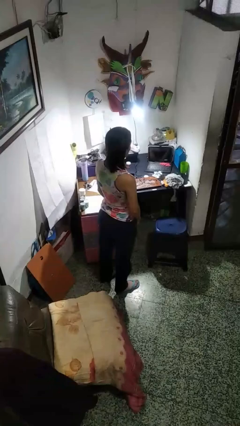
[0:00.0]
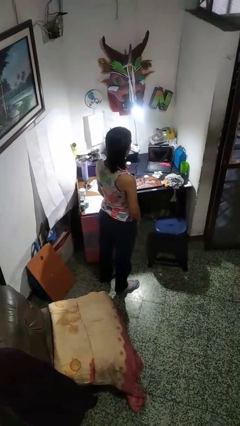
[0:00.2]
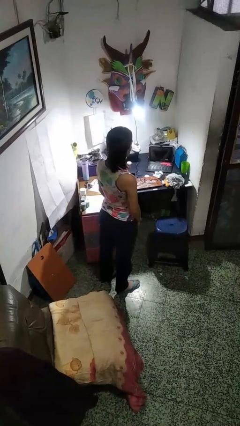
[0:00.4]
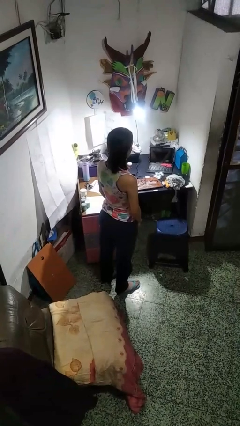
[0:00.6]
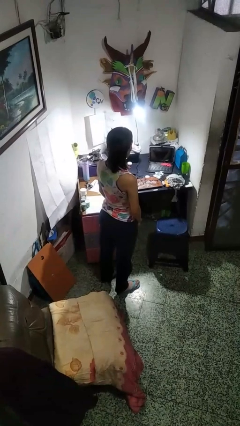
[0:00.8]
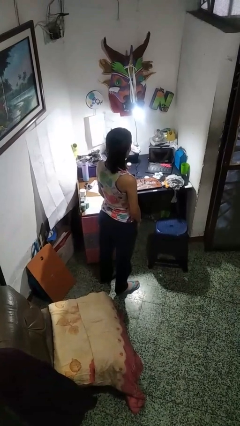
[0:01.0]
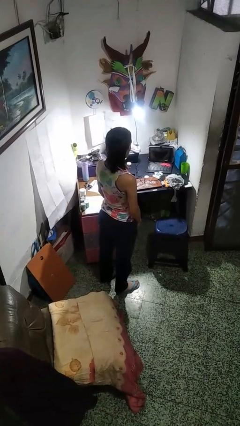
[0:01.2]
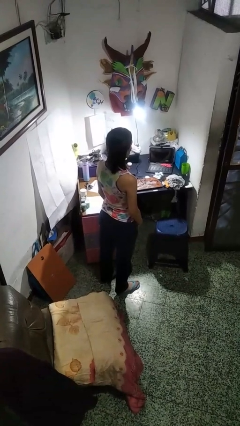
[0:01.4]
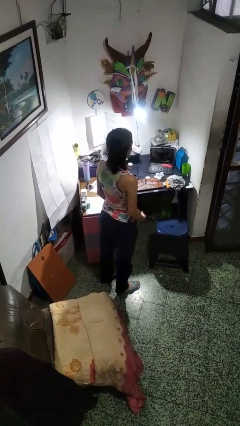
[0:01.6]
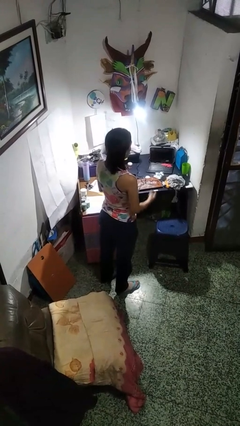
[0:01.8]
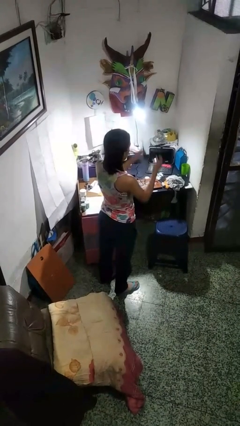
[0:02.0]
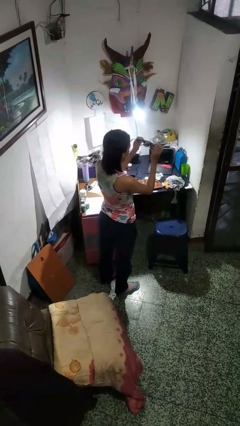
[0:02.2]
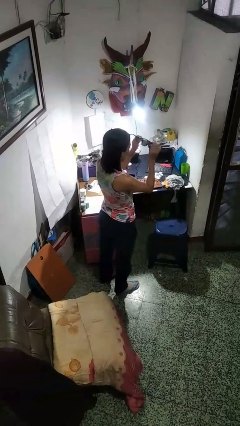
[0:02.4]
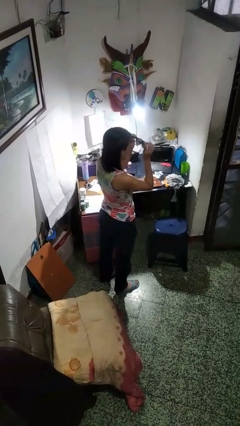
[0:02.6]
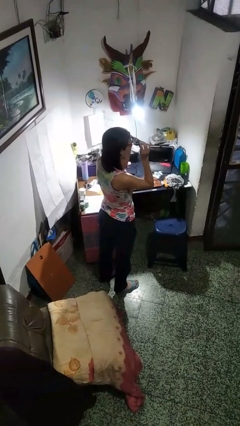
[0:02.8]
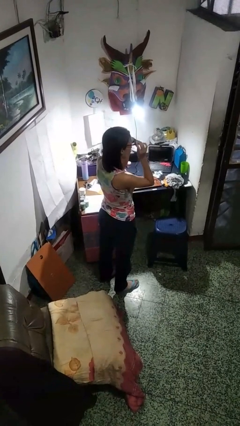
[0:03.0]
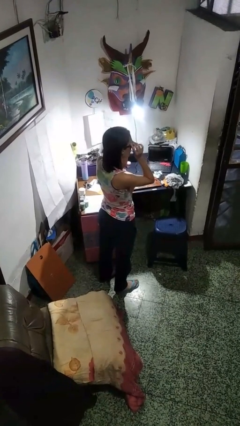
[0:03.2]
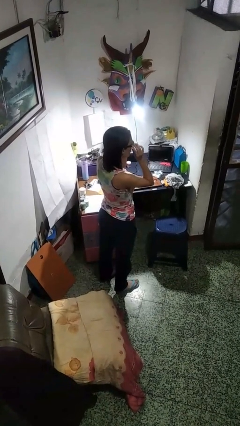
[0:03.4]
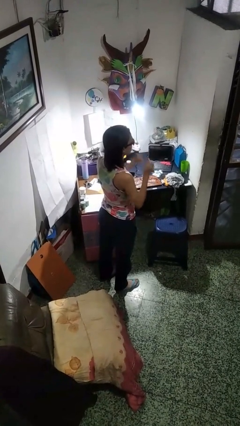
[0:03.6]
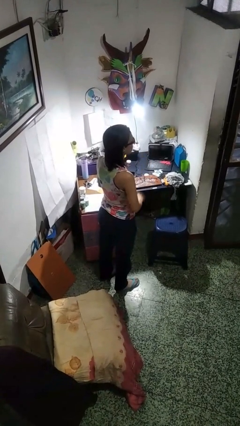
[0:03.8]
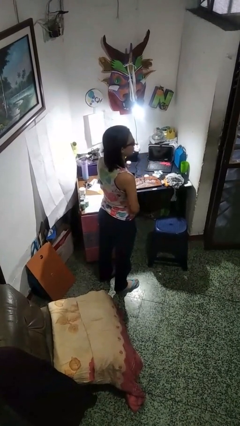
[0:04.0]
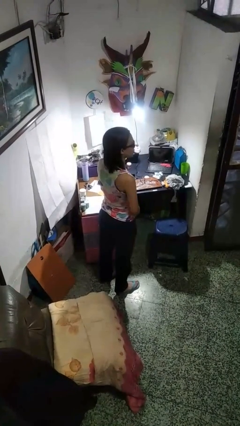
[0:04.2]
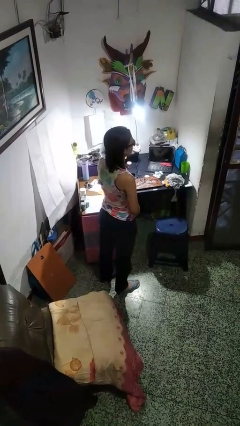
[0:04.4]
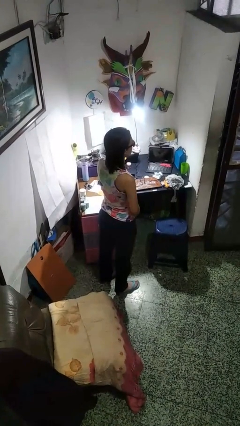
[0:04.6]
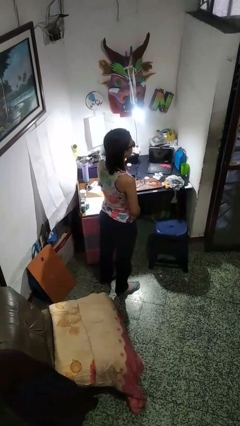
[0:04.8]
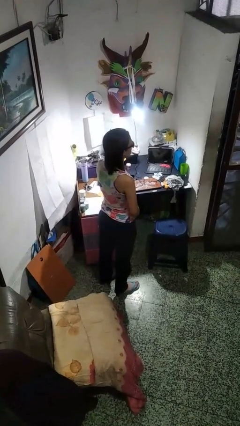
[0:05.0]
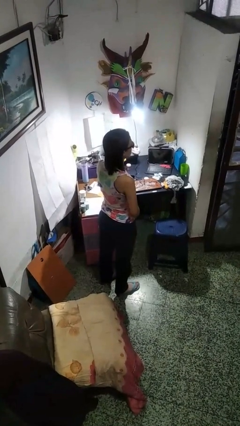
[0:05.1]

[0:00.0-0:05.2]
person puts on sunglasses

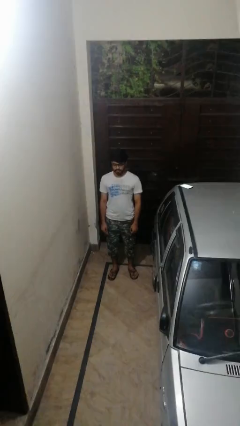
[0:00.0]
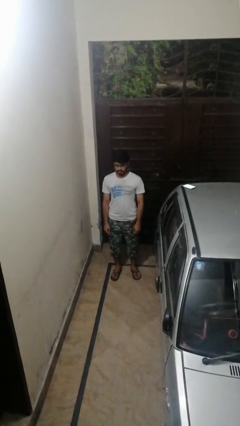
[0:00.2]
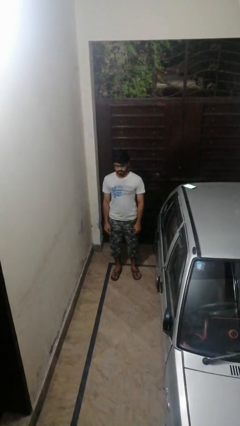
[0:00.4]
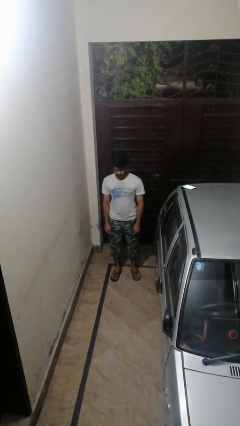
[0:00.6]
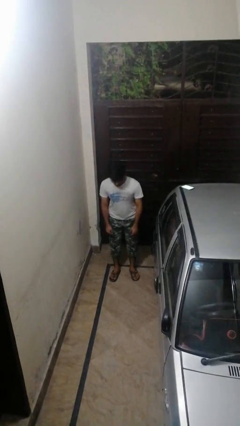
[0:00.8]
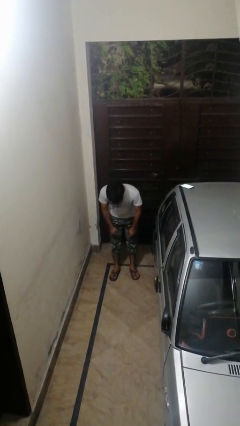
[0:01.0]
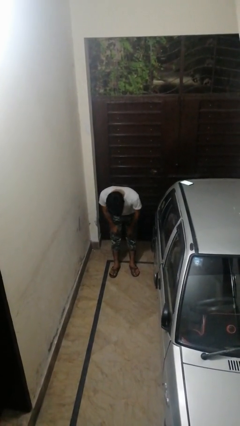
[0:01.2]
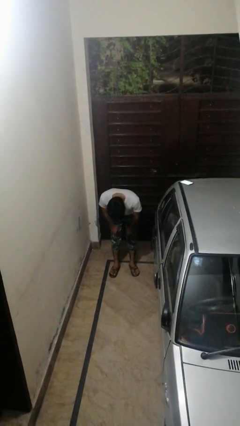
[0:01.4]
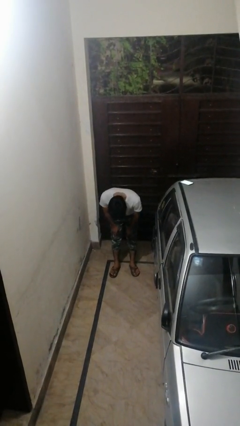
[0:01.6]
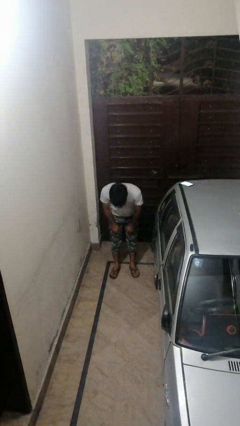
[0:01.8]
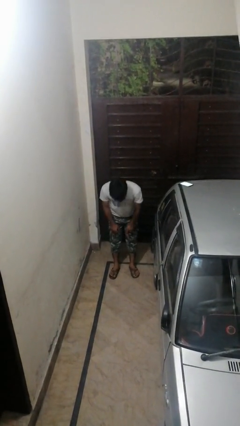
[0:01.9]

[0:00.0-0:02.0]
person bows

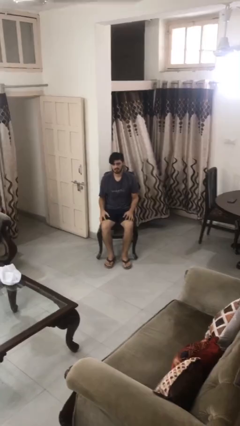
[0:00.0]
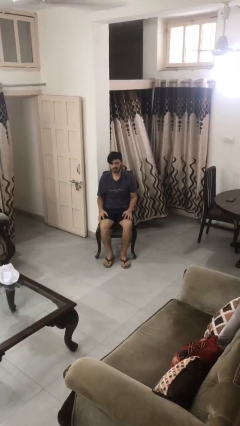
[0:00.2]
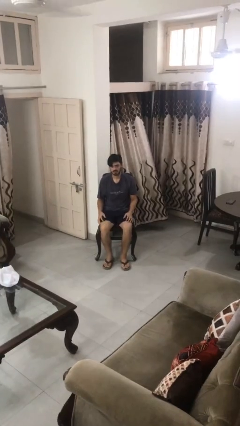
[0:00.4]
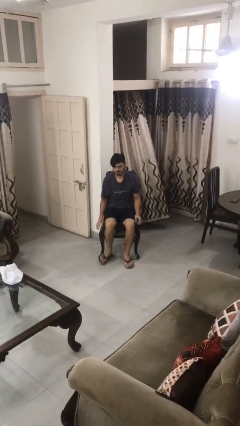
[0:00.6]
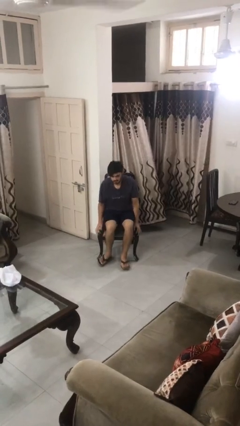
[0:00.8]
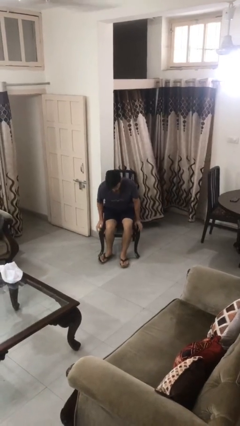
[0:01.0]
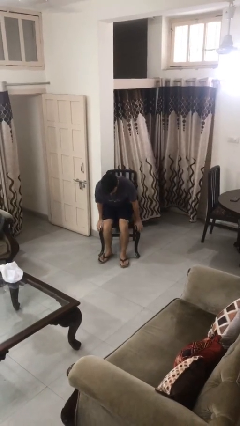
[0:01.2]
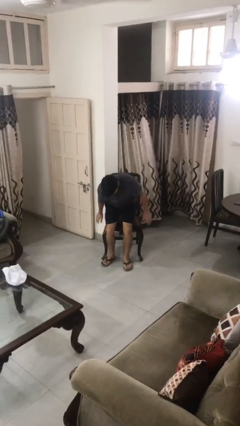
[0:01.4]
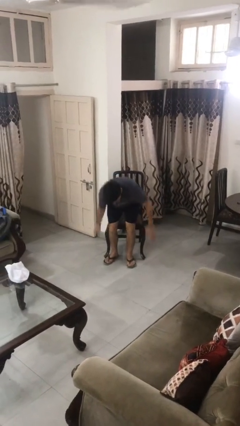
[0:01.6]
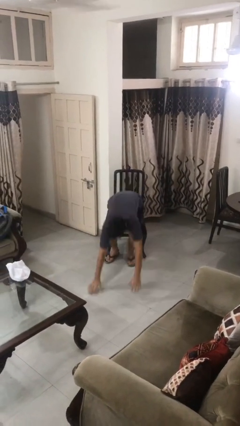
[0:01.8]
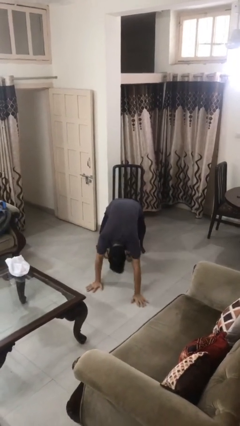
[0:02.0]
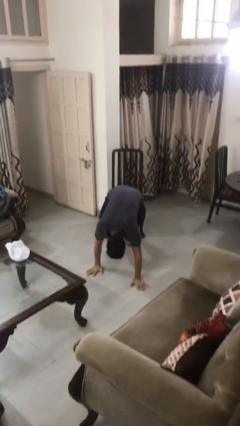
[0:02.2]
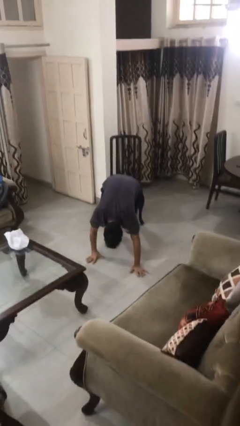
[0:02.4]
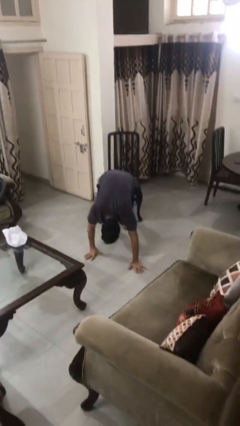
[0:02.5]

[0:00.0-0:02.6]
person falls from chair

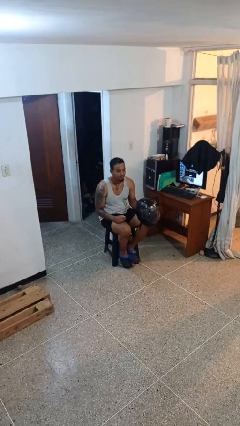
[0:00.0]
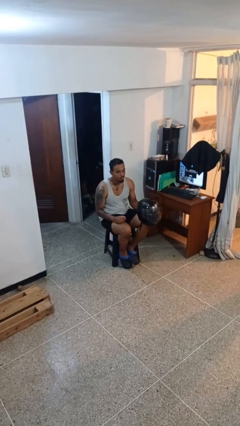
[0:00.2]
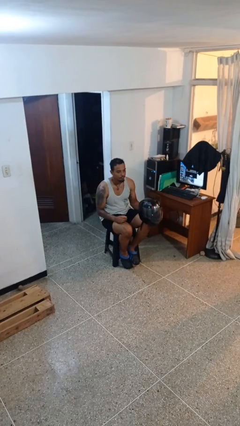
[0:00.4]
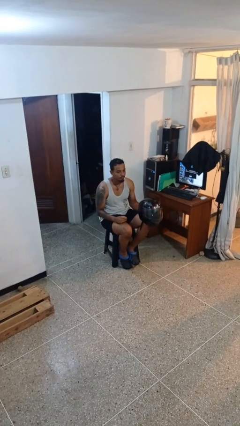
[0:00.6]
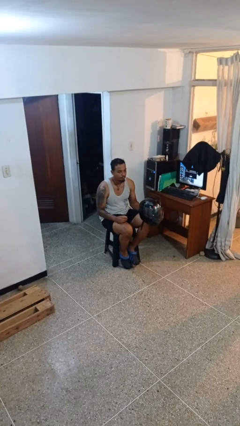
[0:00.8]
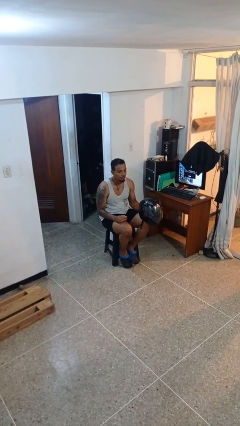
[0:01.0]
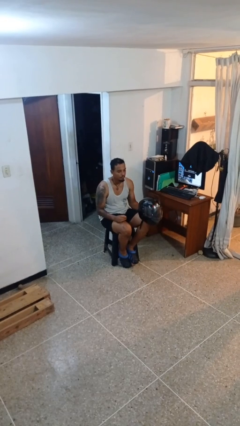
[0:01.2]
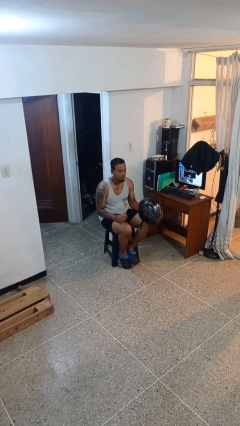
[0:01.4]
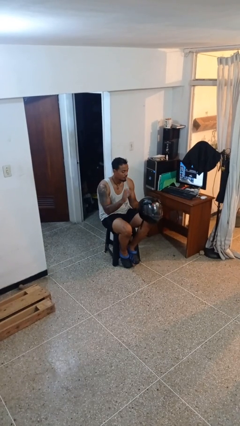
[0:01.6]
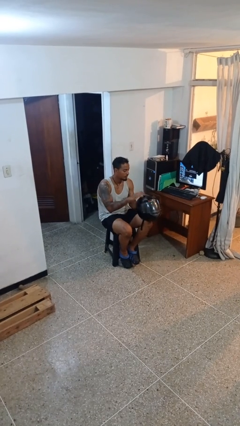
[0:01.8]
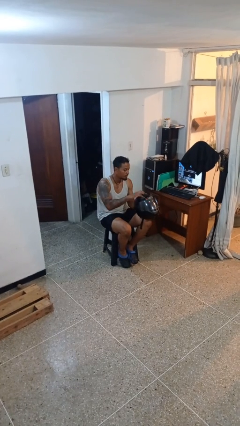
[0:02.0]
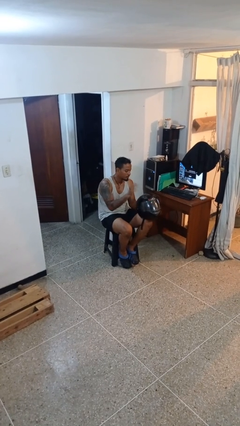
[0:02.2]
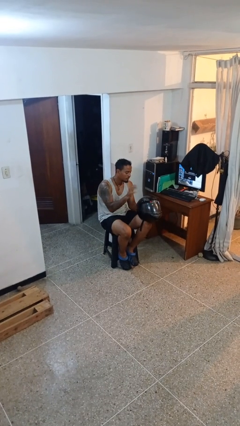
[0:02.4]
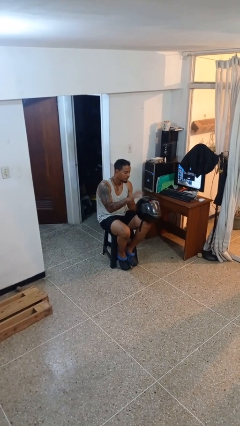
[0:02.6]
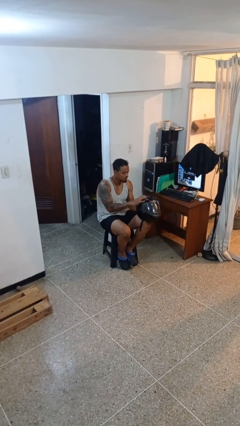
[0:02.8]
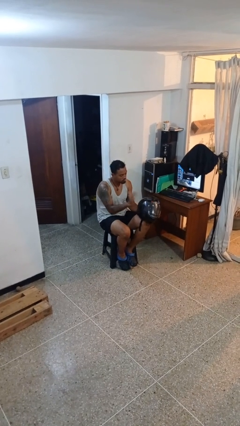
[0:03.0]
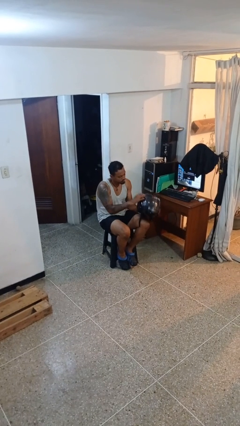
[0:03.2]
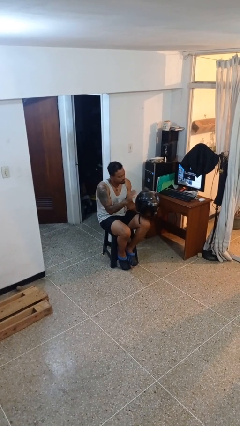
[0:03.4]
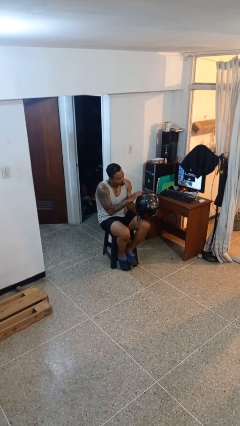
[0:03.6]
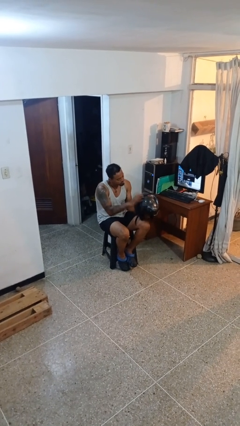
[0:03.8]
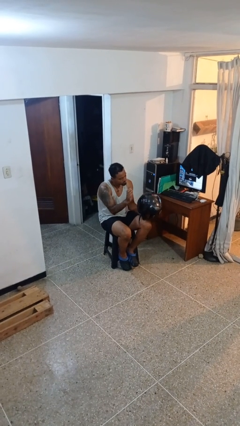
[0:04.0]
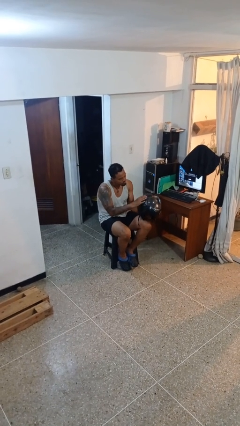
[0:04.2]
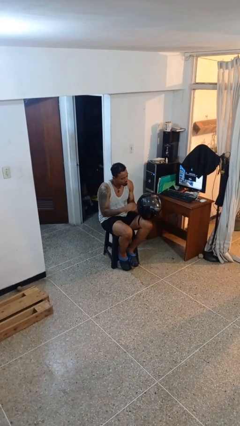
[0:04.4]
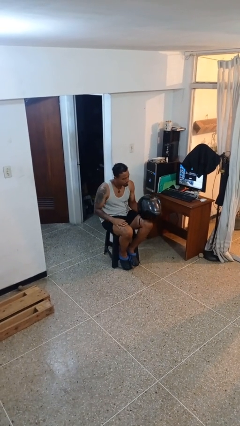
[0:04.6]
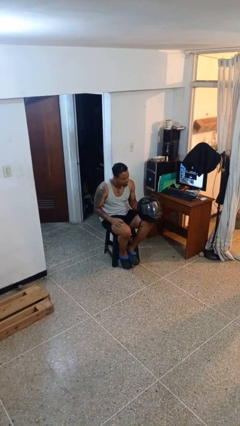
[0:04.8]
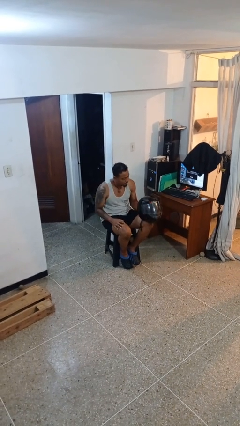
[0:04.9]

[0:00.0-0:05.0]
person taps object with finger

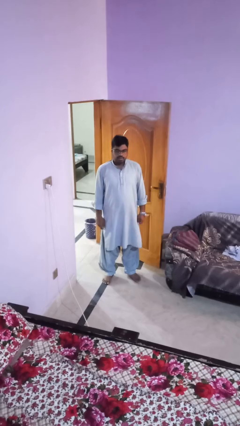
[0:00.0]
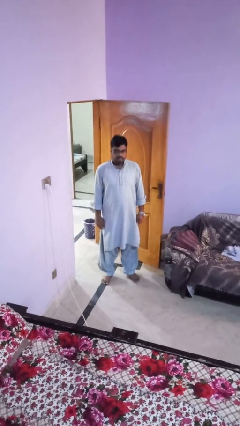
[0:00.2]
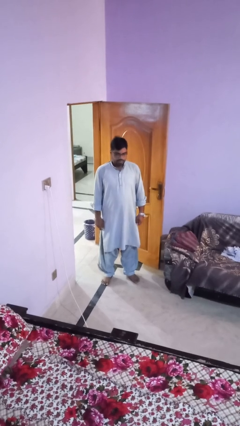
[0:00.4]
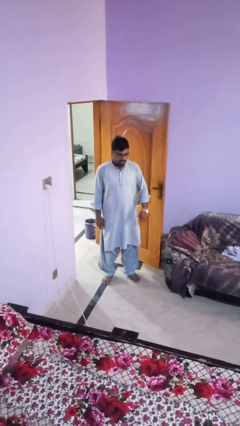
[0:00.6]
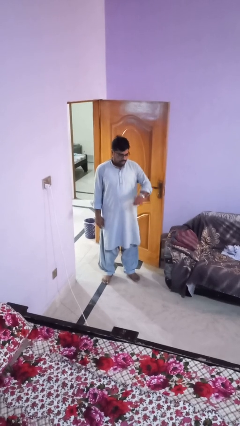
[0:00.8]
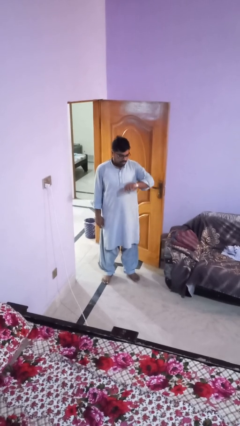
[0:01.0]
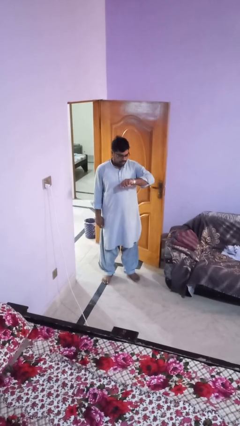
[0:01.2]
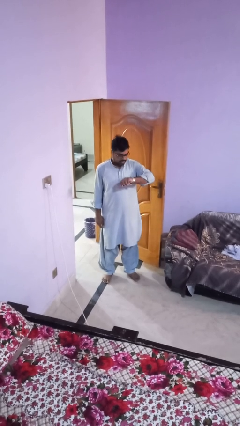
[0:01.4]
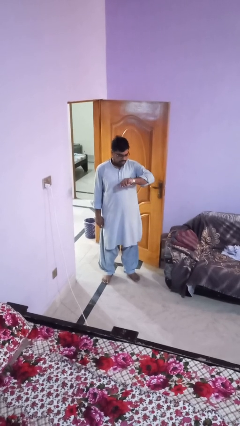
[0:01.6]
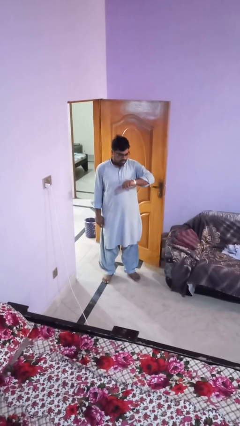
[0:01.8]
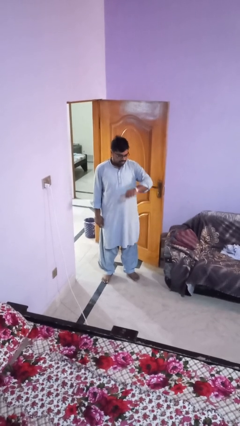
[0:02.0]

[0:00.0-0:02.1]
person looks at wristwatch

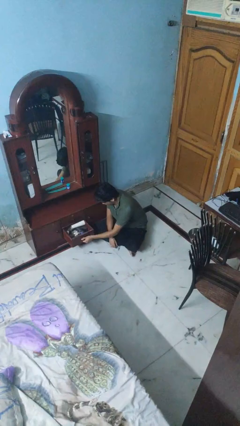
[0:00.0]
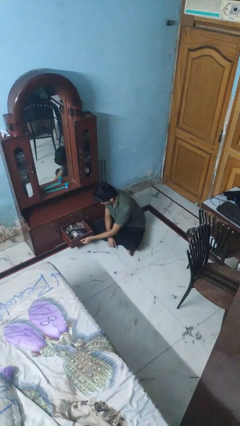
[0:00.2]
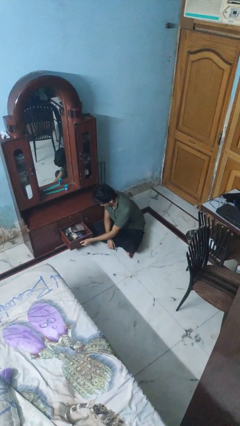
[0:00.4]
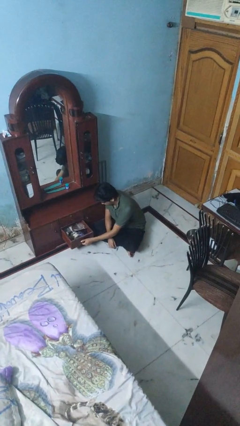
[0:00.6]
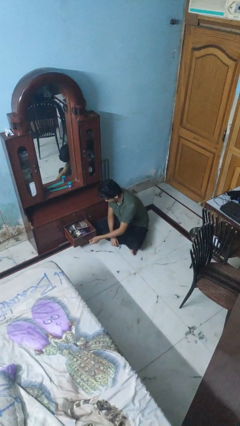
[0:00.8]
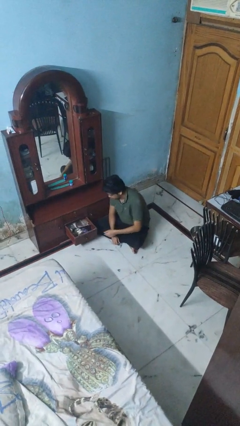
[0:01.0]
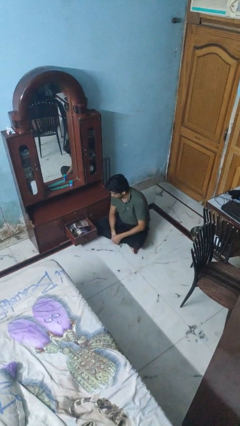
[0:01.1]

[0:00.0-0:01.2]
person opens dresser drawer
